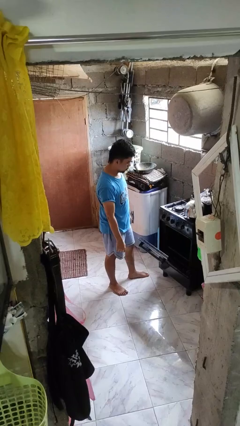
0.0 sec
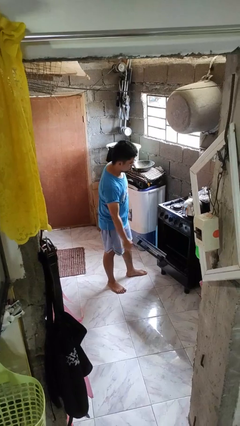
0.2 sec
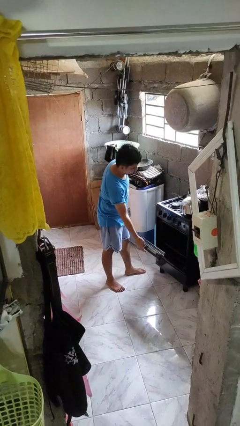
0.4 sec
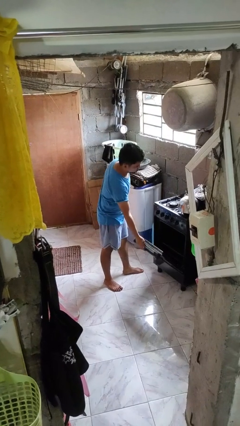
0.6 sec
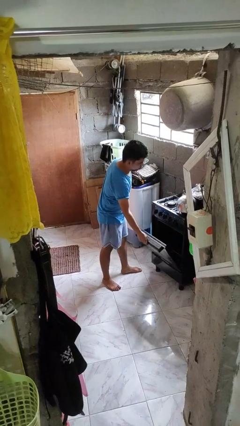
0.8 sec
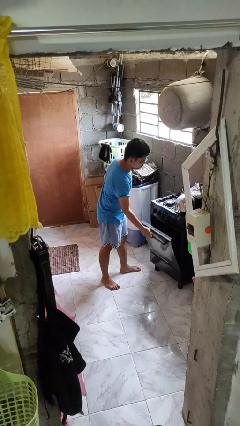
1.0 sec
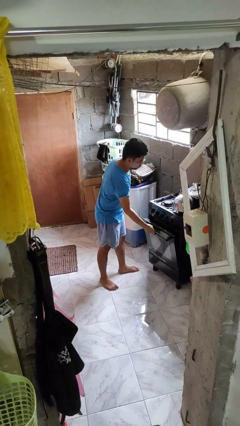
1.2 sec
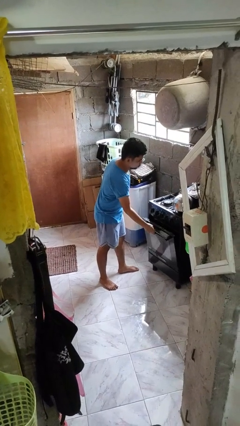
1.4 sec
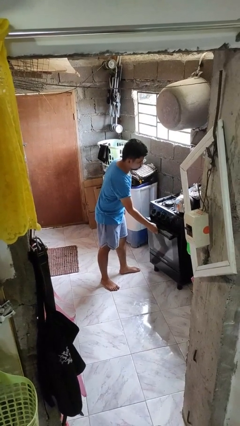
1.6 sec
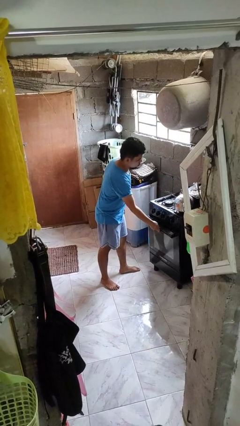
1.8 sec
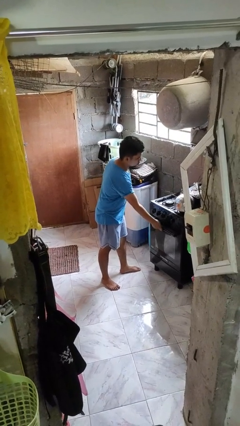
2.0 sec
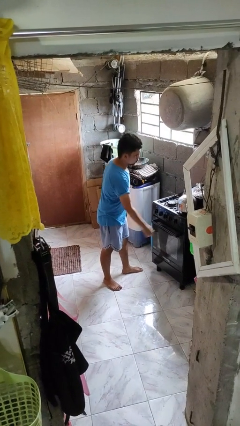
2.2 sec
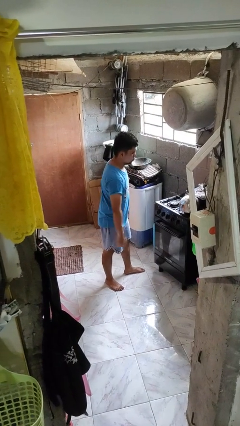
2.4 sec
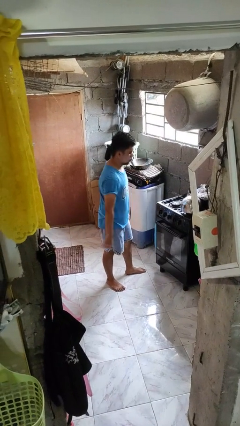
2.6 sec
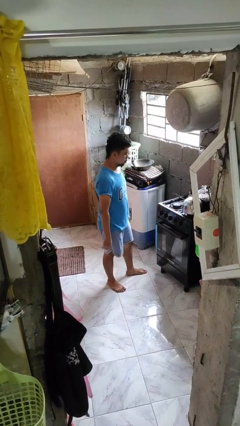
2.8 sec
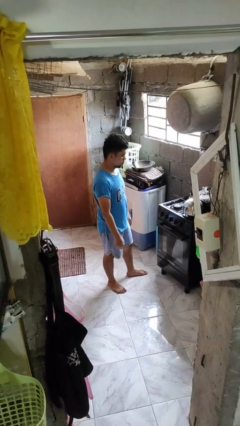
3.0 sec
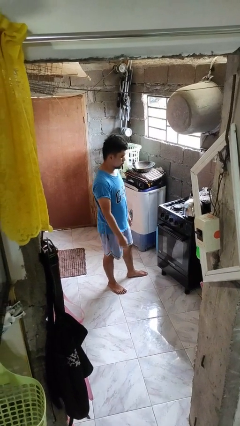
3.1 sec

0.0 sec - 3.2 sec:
person closes oven door

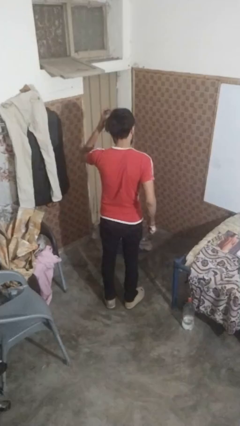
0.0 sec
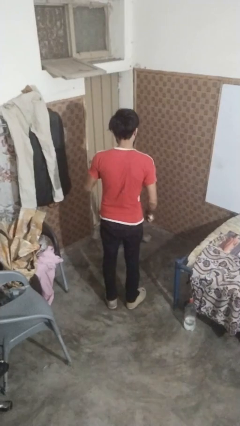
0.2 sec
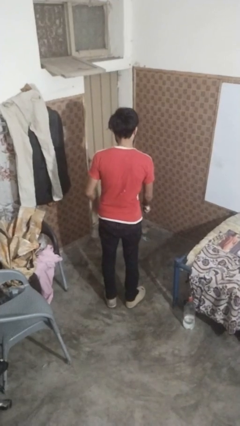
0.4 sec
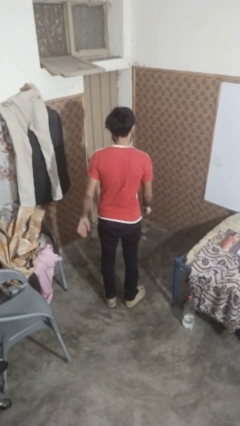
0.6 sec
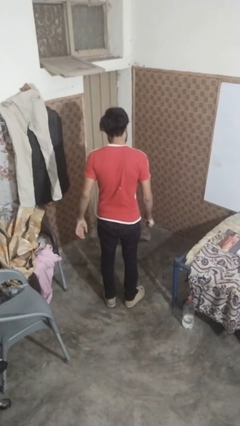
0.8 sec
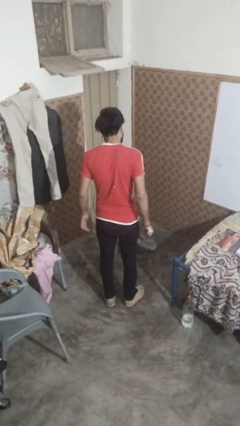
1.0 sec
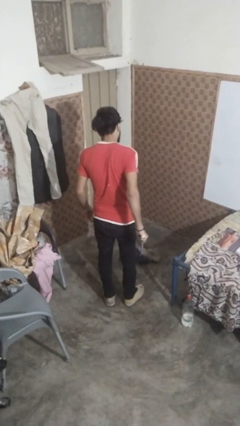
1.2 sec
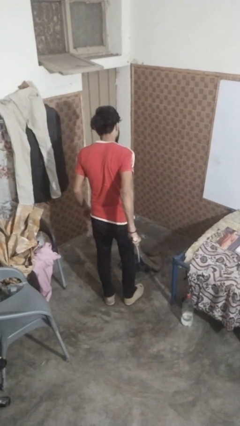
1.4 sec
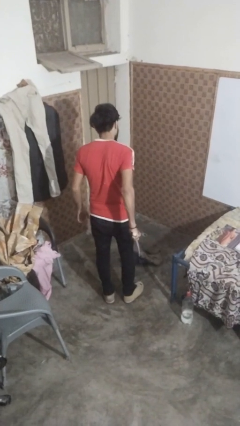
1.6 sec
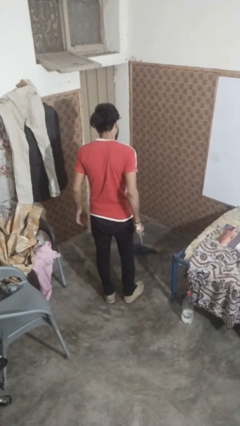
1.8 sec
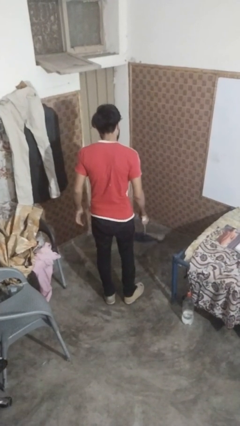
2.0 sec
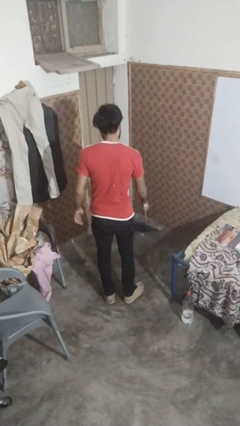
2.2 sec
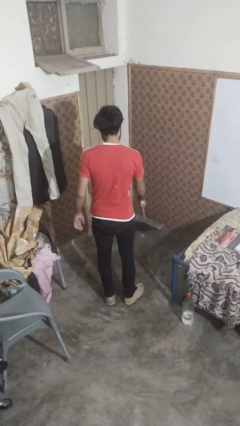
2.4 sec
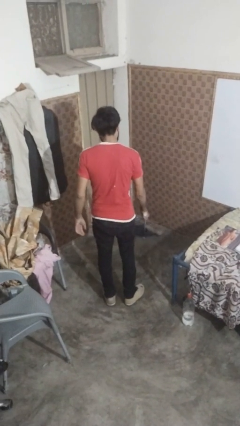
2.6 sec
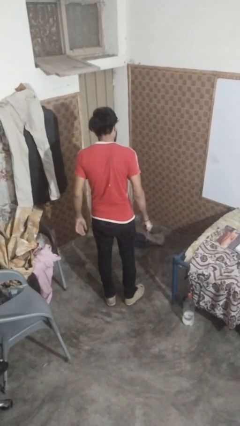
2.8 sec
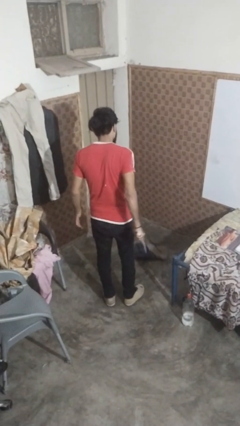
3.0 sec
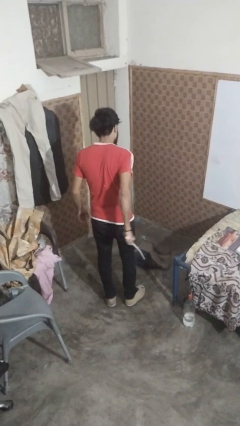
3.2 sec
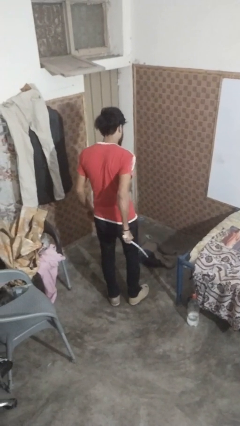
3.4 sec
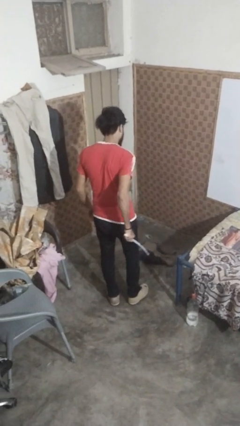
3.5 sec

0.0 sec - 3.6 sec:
person mops

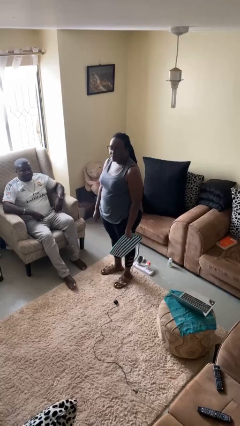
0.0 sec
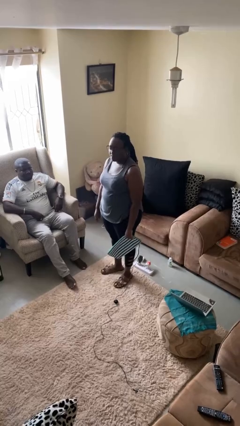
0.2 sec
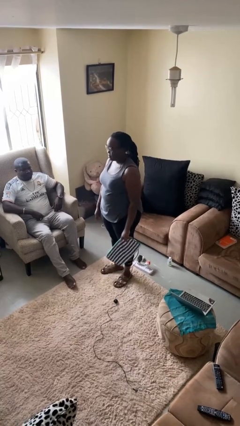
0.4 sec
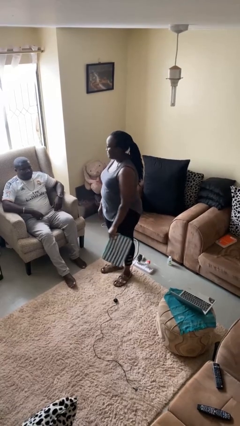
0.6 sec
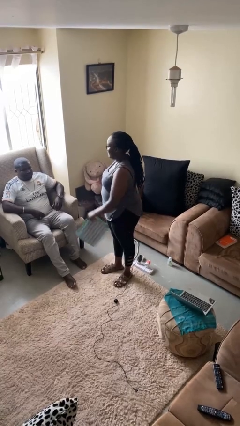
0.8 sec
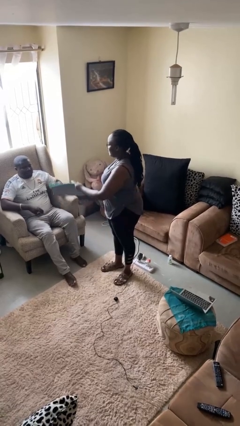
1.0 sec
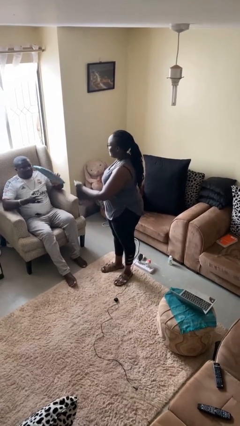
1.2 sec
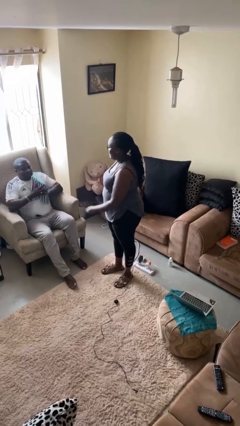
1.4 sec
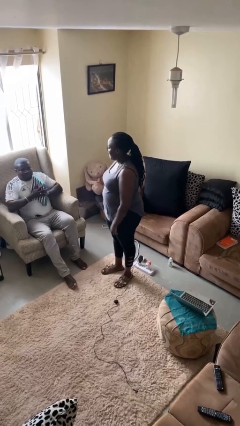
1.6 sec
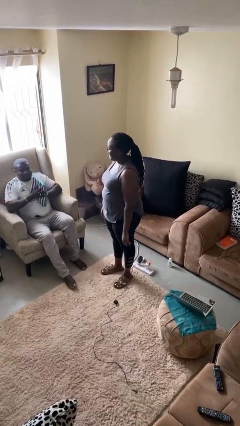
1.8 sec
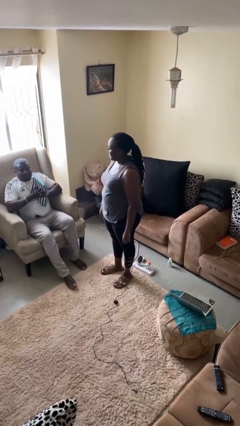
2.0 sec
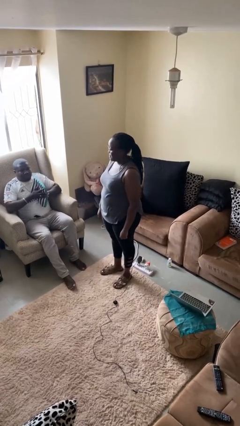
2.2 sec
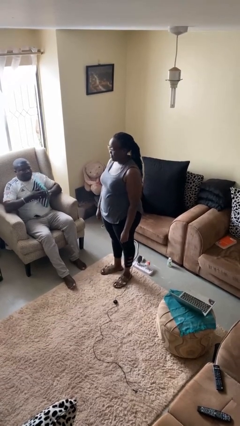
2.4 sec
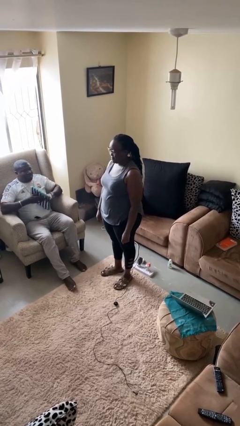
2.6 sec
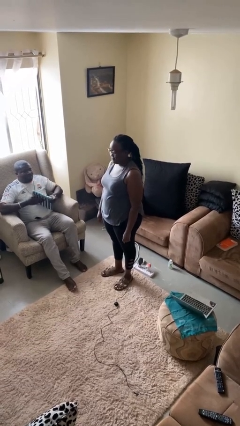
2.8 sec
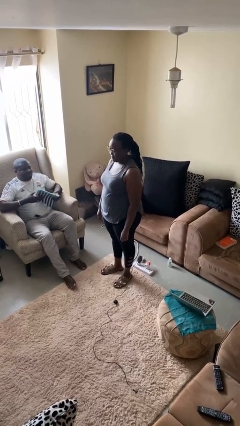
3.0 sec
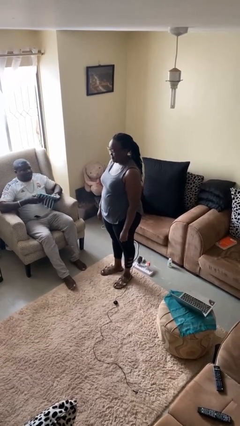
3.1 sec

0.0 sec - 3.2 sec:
person throws object to person

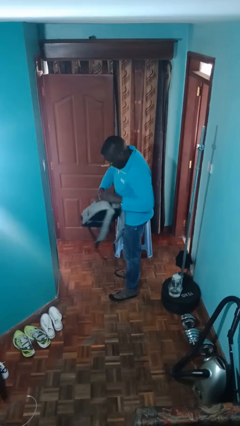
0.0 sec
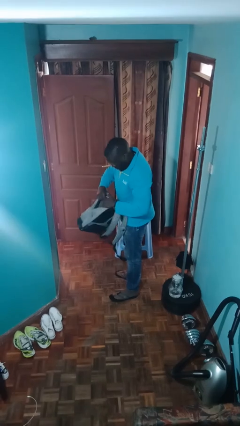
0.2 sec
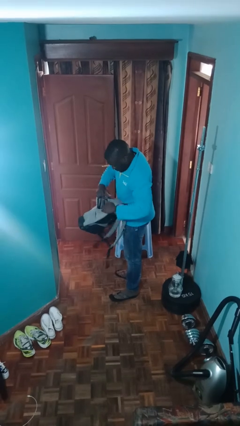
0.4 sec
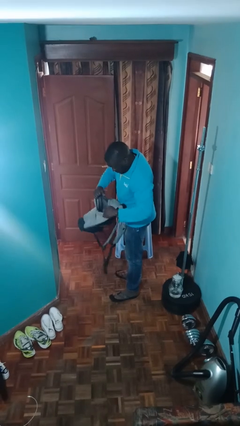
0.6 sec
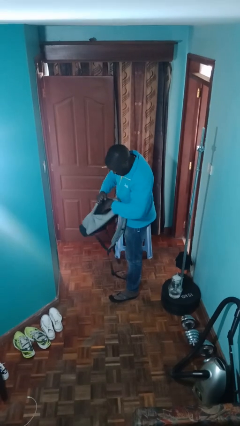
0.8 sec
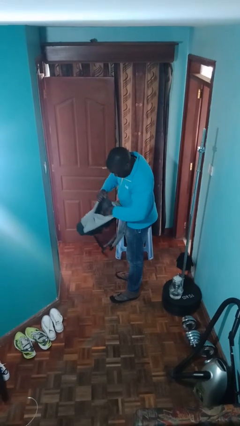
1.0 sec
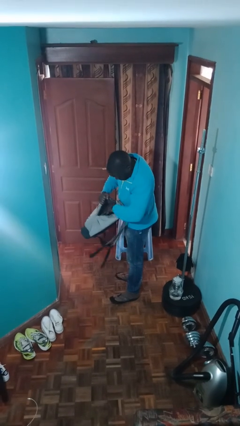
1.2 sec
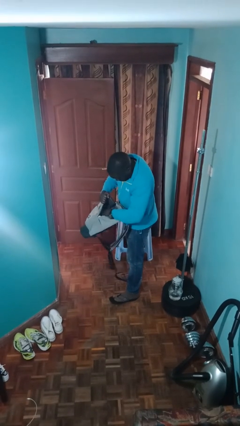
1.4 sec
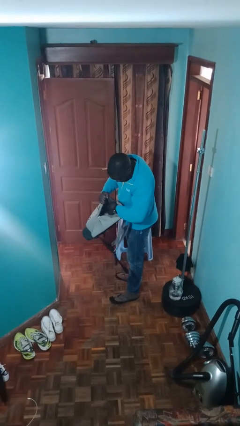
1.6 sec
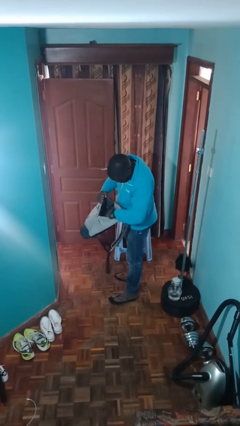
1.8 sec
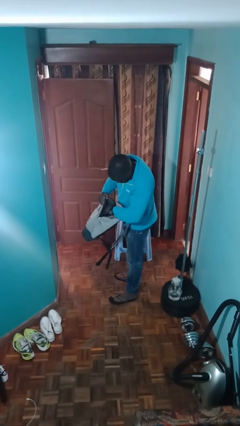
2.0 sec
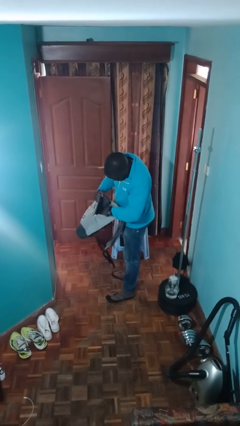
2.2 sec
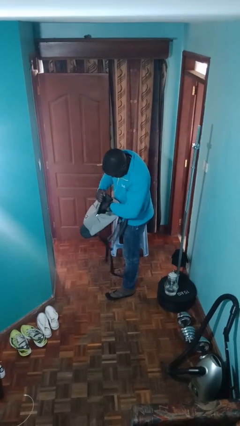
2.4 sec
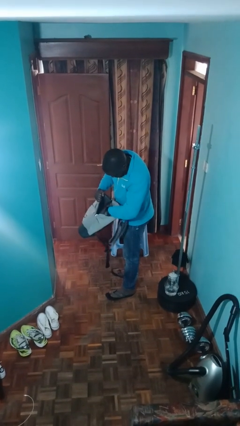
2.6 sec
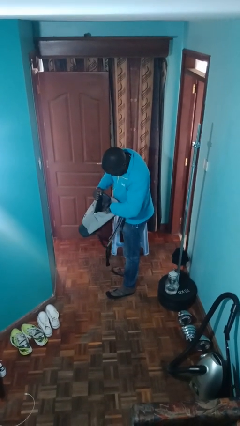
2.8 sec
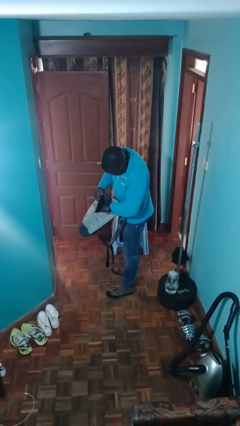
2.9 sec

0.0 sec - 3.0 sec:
person searches in backpack

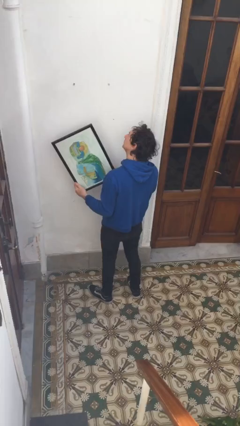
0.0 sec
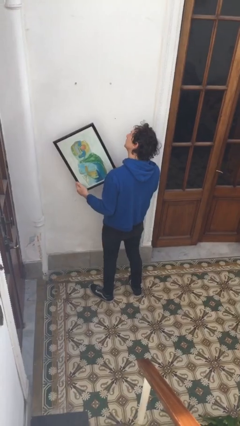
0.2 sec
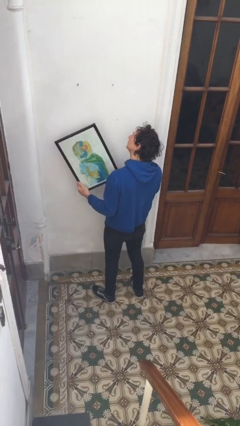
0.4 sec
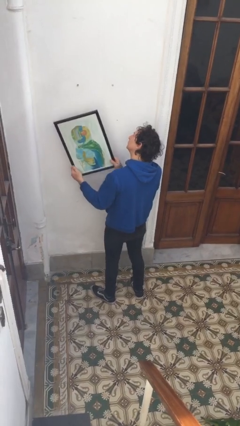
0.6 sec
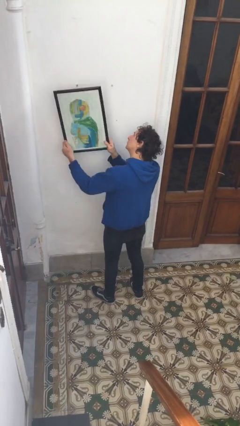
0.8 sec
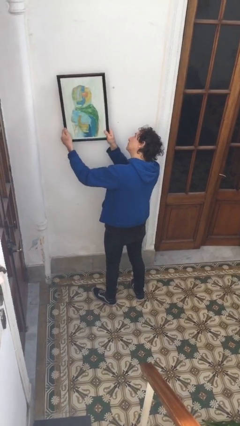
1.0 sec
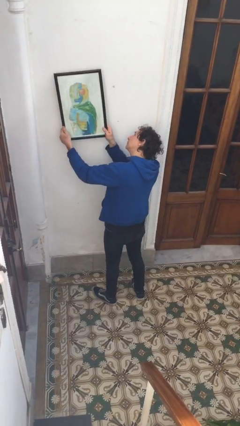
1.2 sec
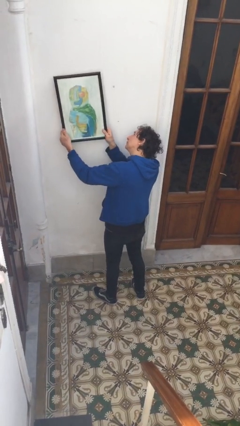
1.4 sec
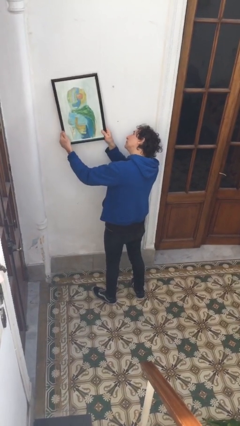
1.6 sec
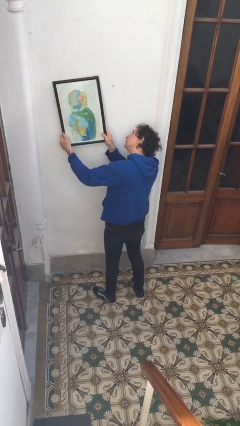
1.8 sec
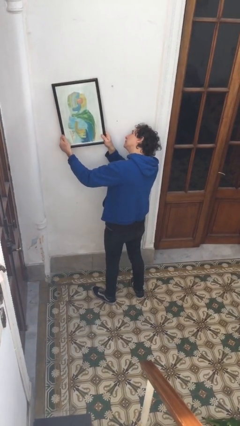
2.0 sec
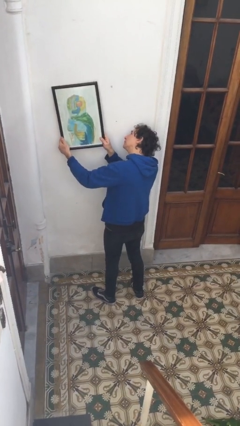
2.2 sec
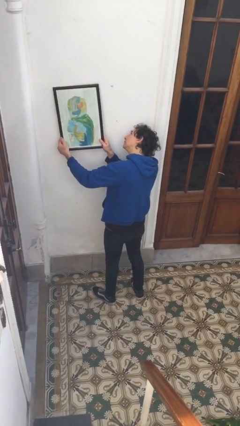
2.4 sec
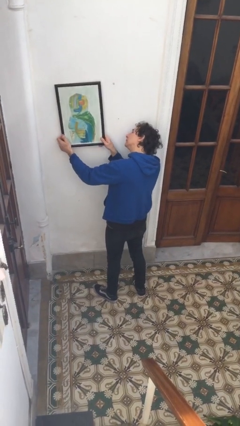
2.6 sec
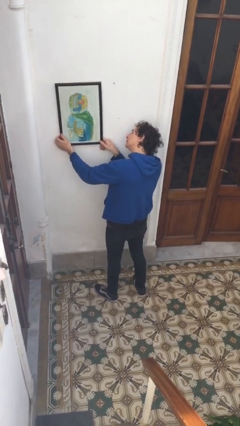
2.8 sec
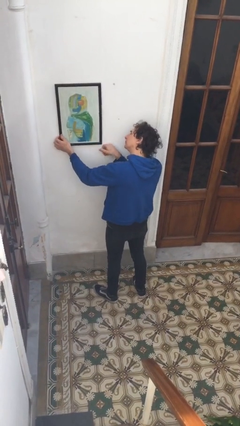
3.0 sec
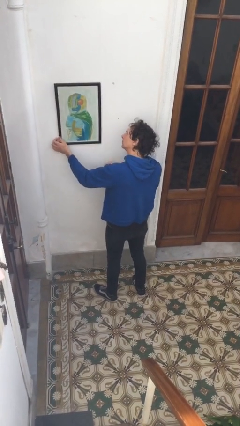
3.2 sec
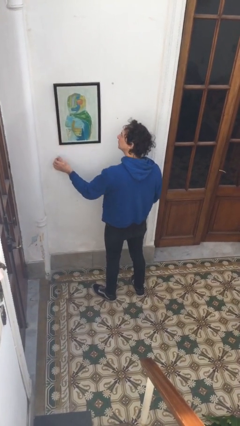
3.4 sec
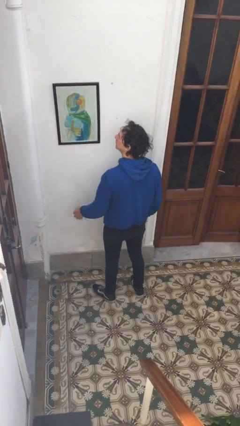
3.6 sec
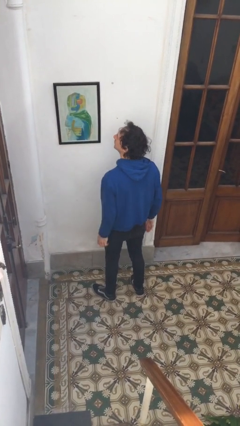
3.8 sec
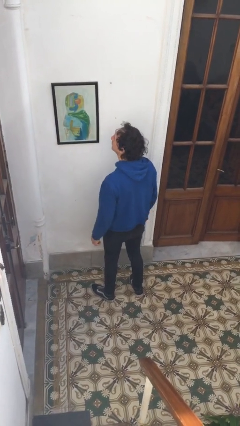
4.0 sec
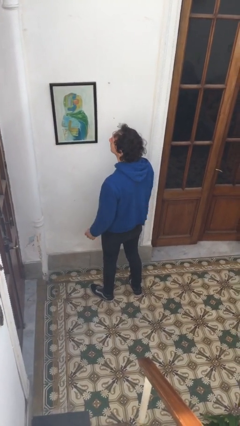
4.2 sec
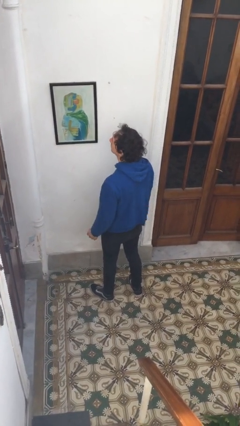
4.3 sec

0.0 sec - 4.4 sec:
person puts up picture frame

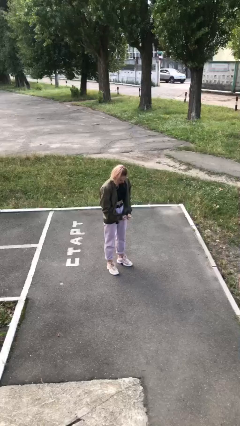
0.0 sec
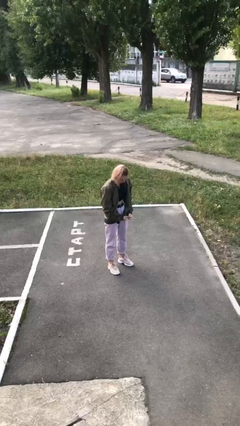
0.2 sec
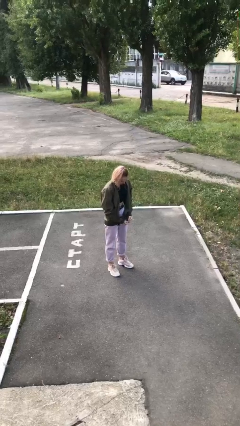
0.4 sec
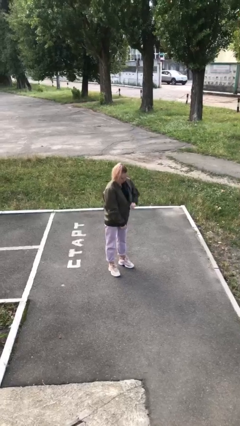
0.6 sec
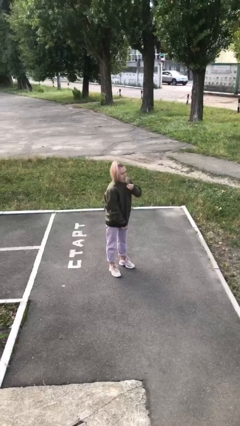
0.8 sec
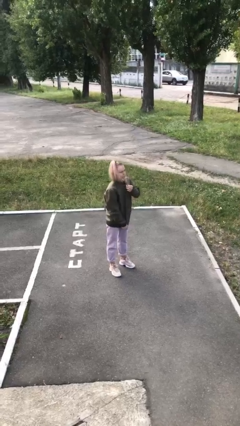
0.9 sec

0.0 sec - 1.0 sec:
person zips up jacket
